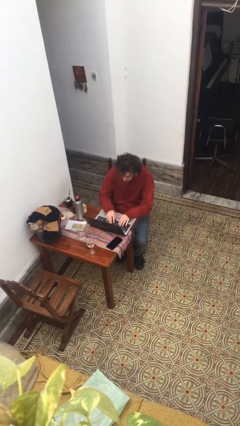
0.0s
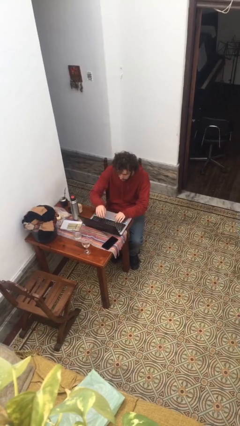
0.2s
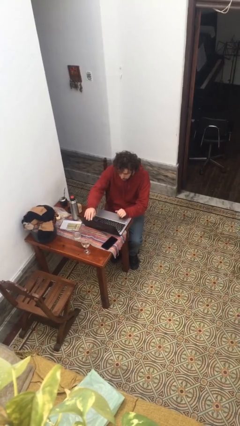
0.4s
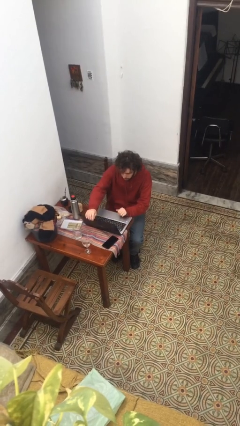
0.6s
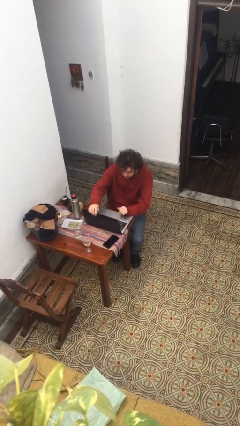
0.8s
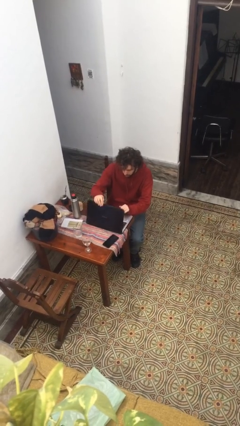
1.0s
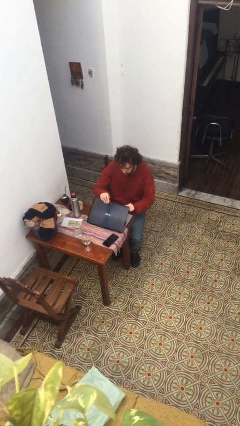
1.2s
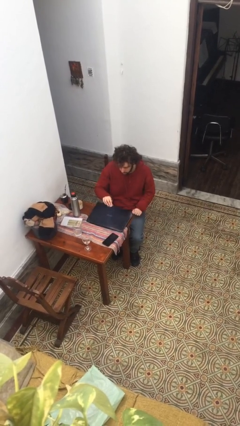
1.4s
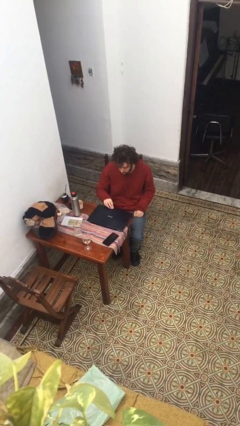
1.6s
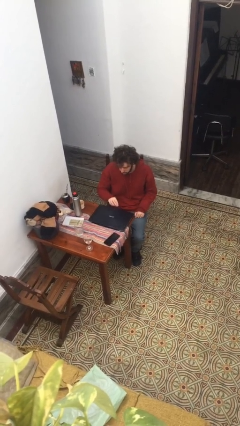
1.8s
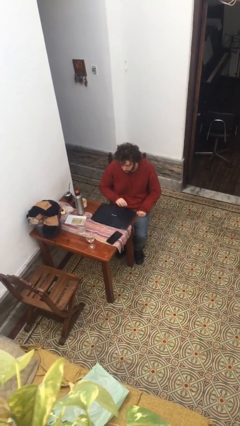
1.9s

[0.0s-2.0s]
person closes laptop

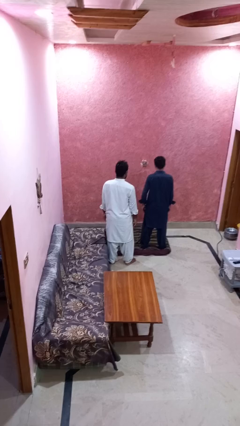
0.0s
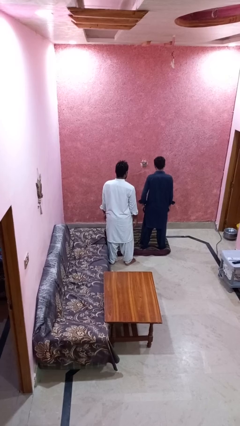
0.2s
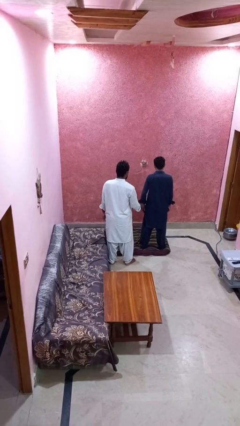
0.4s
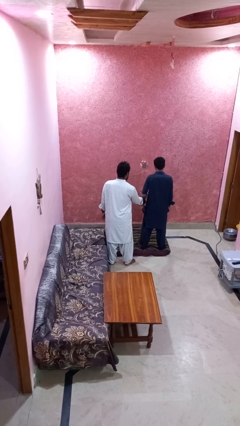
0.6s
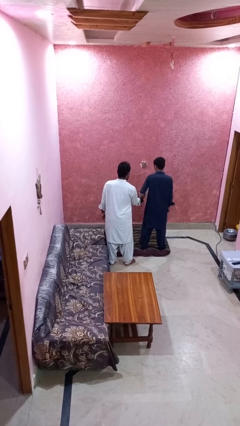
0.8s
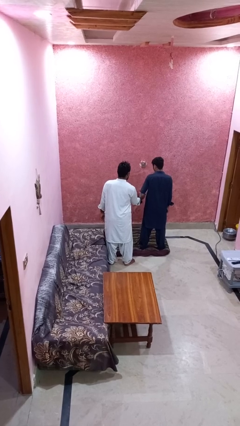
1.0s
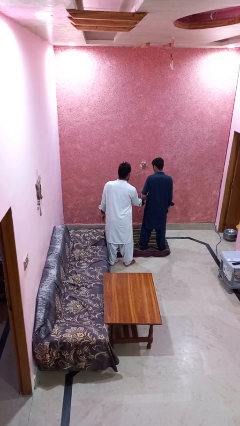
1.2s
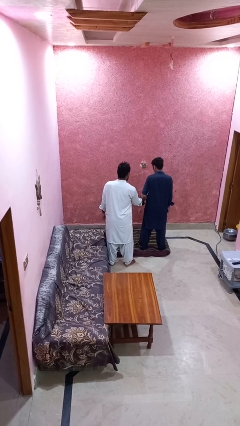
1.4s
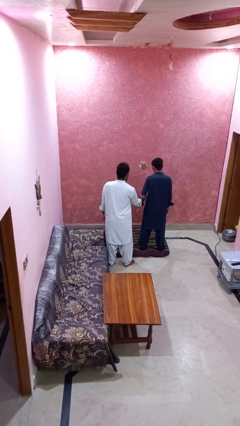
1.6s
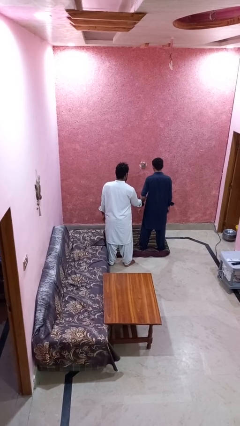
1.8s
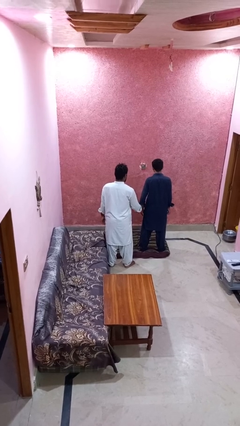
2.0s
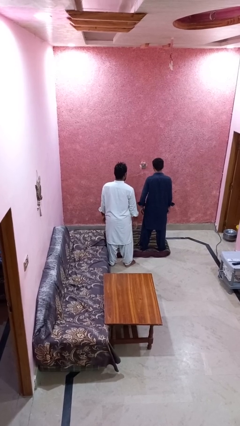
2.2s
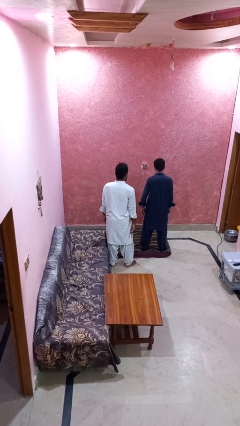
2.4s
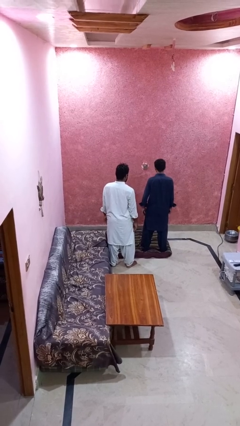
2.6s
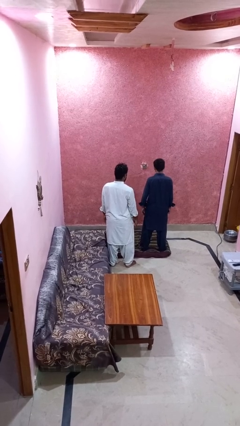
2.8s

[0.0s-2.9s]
person grabs person by bicep

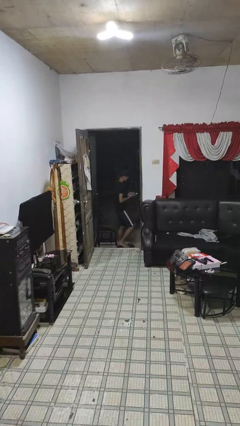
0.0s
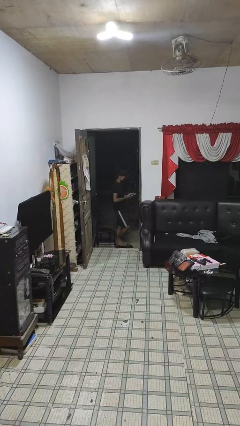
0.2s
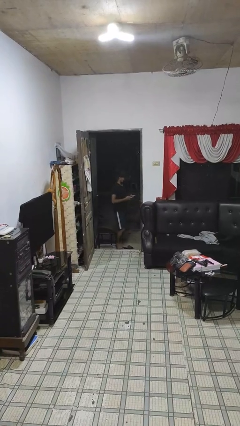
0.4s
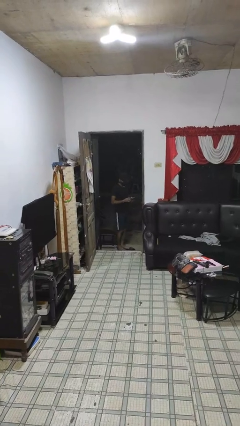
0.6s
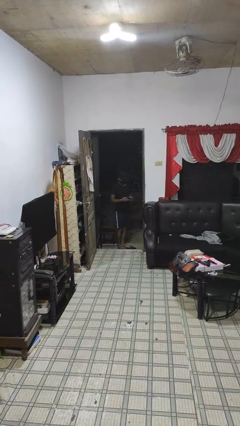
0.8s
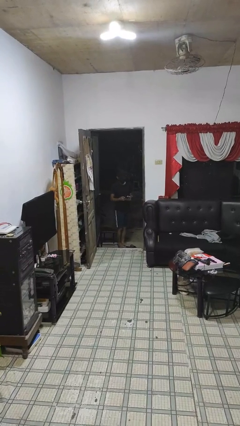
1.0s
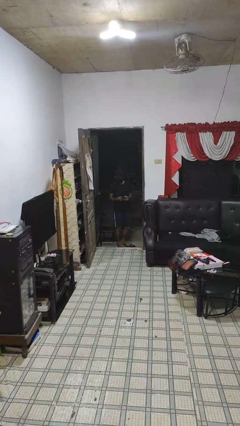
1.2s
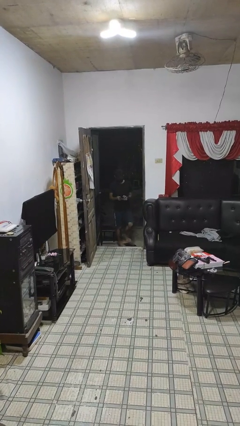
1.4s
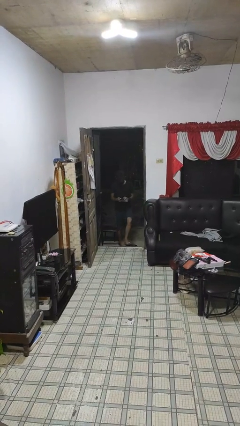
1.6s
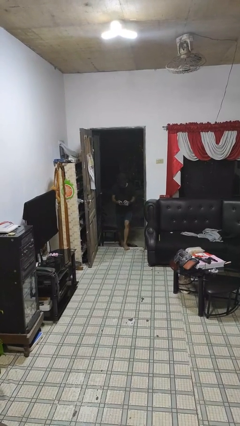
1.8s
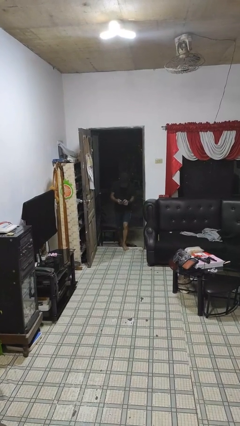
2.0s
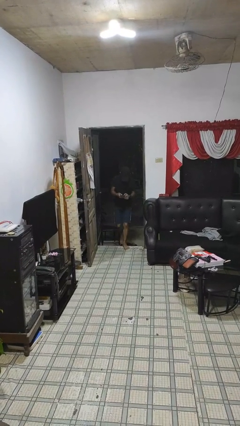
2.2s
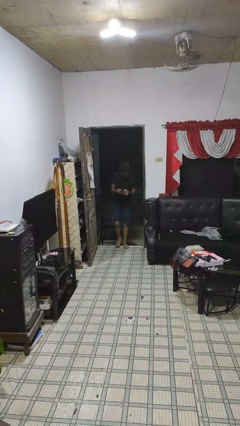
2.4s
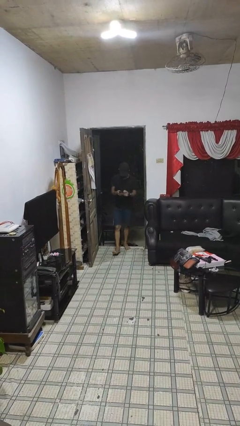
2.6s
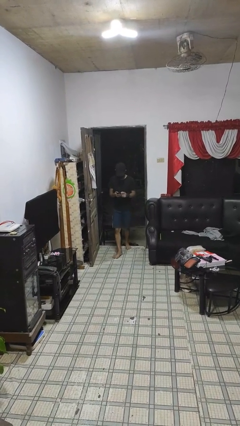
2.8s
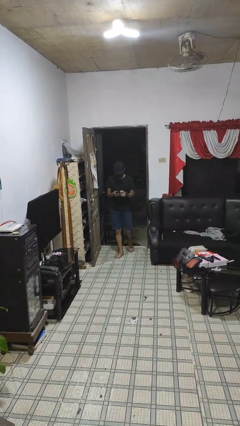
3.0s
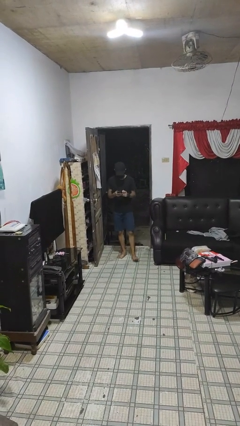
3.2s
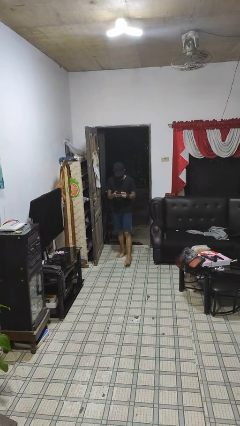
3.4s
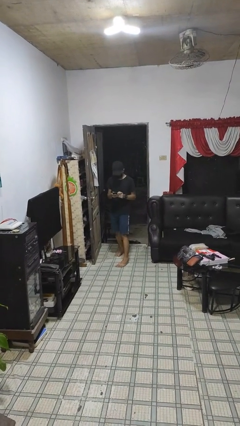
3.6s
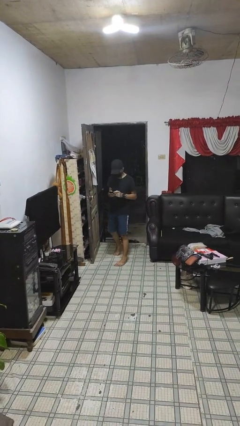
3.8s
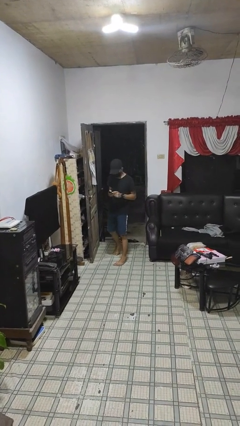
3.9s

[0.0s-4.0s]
person enters scene through structure

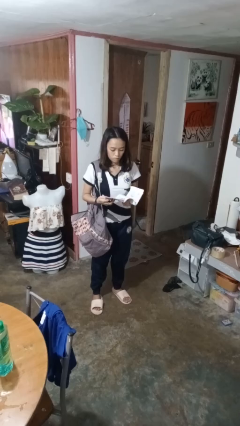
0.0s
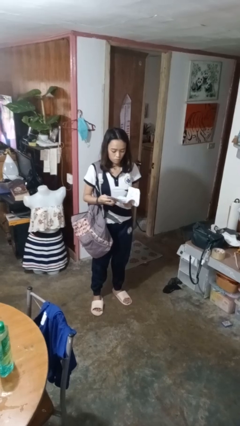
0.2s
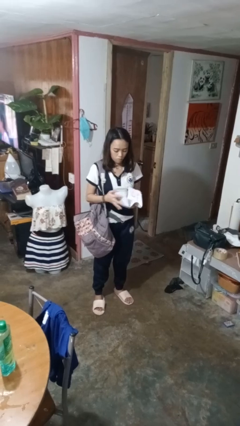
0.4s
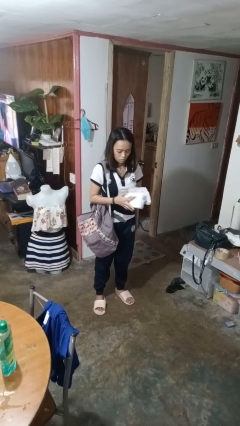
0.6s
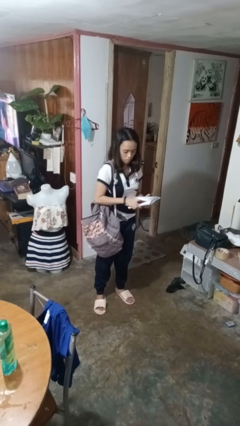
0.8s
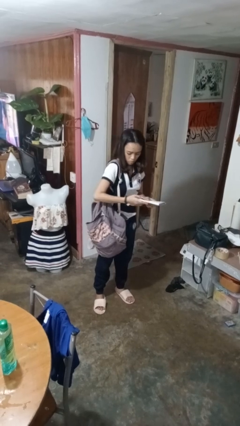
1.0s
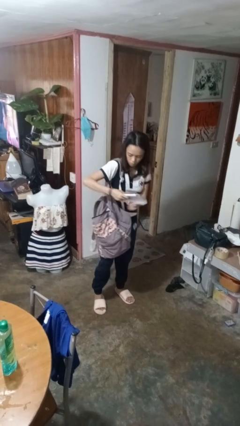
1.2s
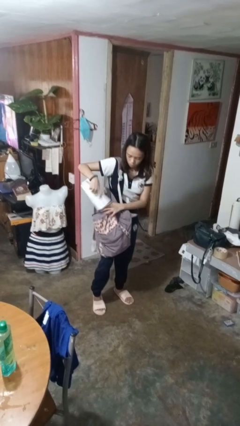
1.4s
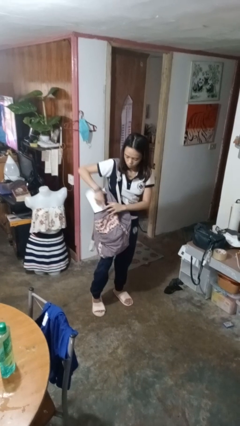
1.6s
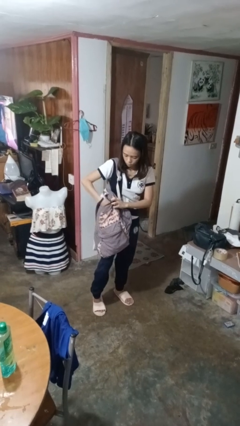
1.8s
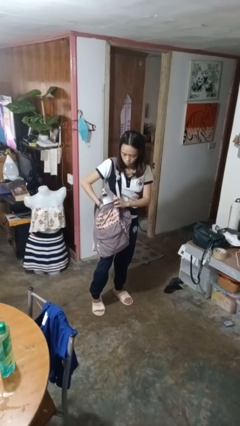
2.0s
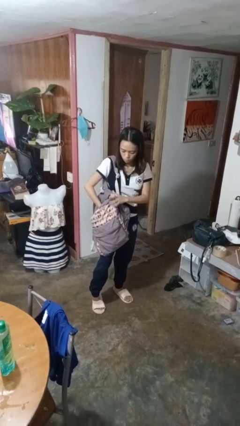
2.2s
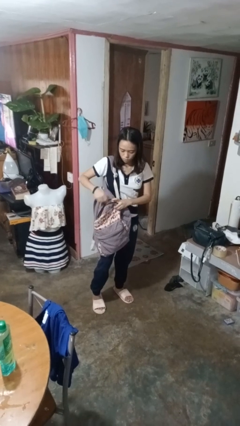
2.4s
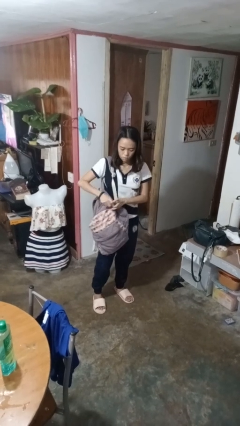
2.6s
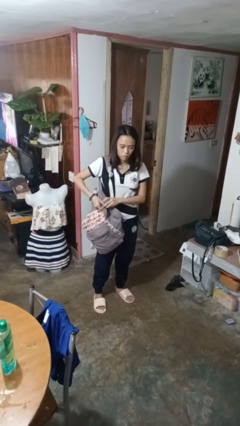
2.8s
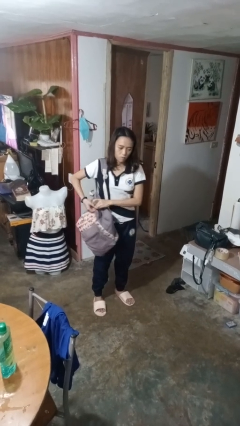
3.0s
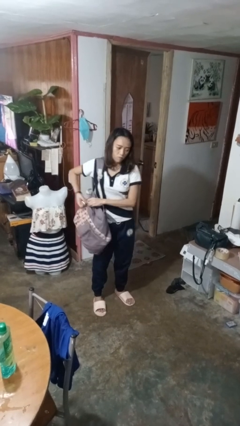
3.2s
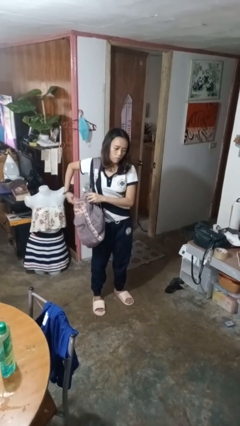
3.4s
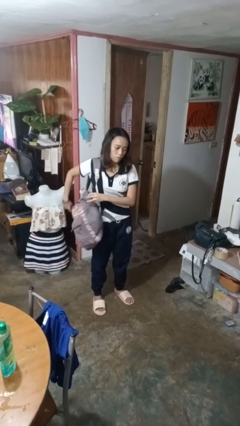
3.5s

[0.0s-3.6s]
person puts object into backpack

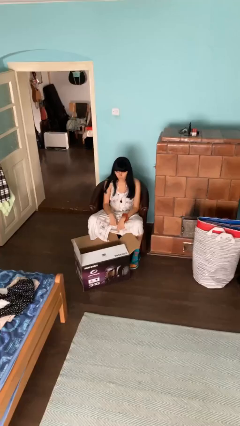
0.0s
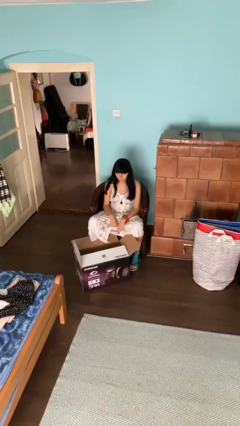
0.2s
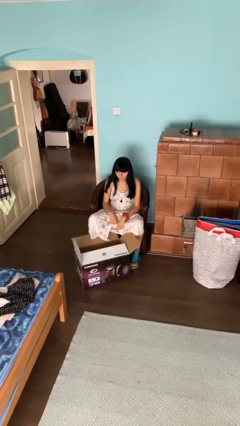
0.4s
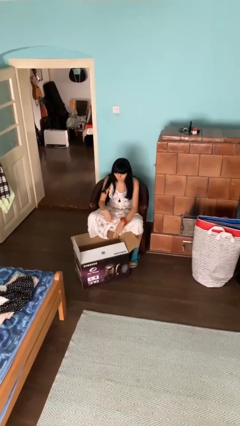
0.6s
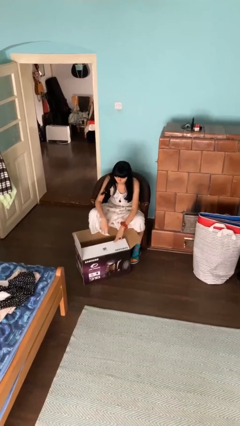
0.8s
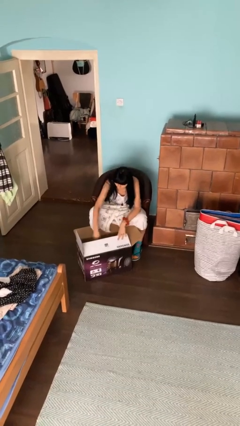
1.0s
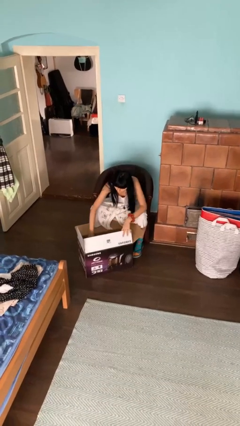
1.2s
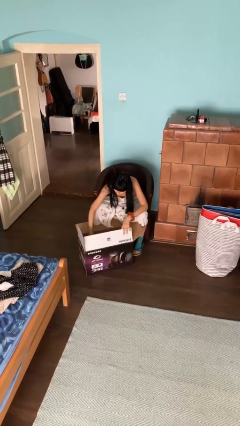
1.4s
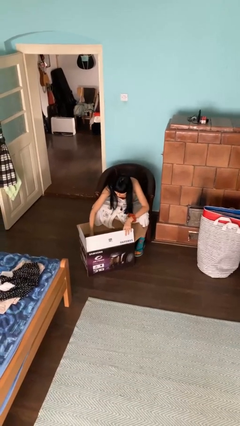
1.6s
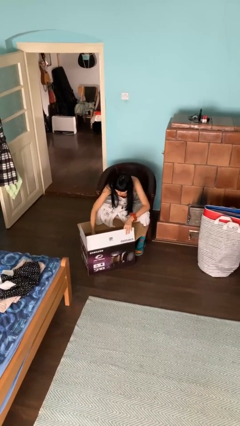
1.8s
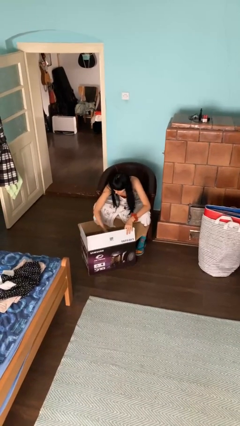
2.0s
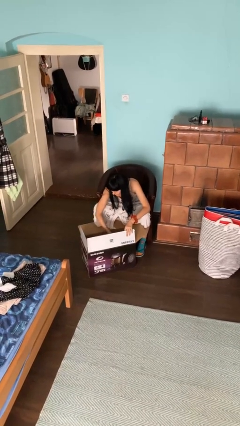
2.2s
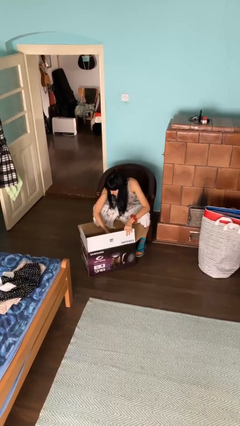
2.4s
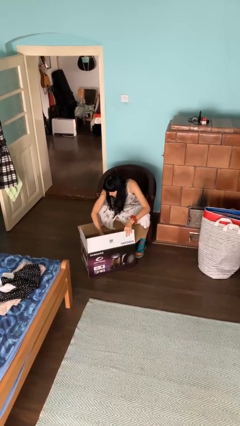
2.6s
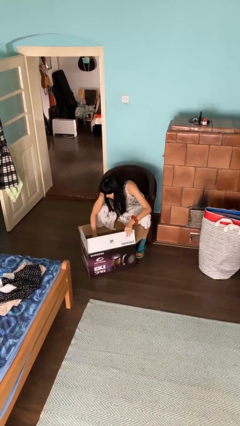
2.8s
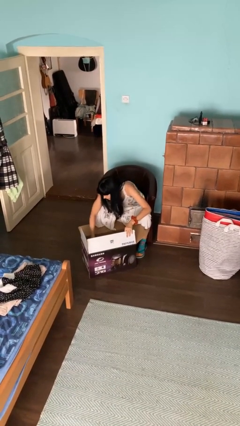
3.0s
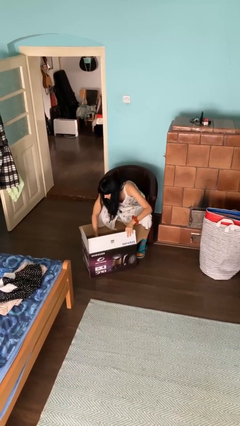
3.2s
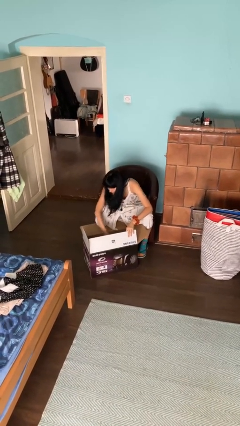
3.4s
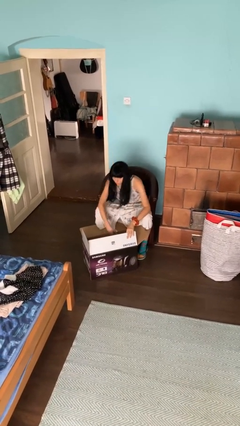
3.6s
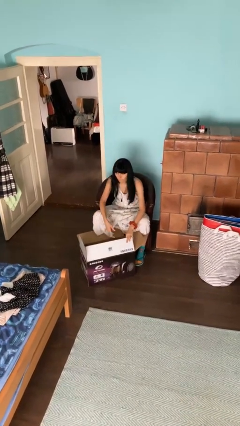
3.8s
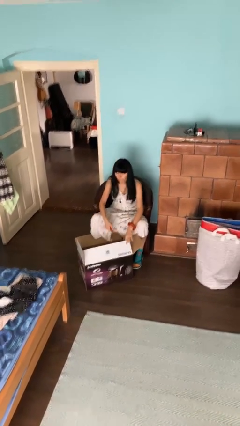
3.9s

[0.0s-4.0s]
person searches in box

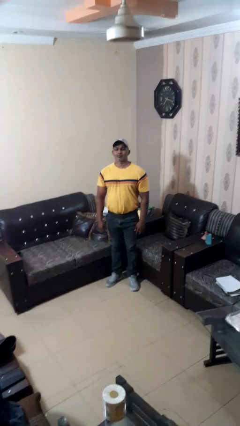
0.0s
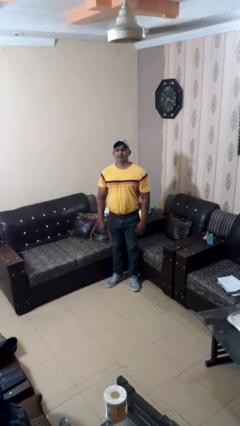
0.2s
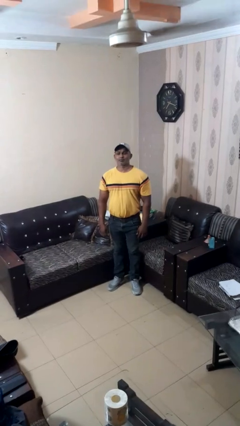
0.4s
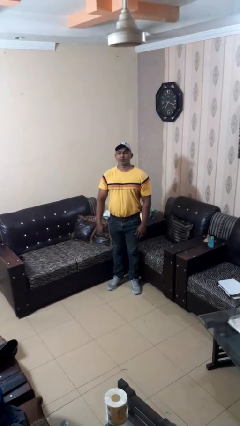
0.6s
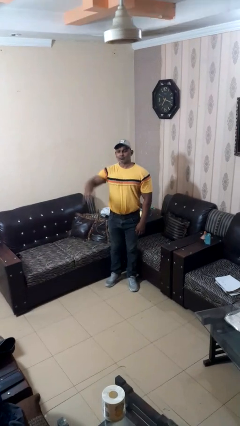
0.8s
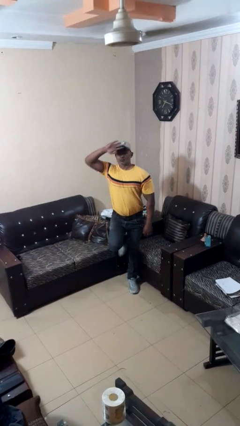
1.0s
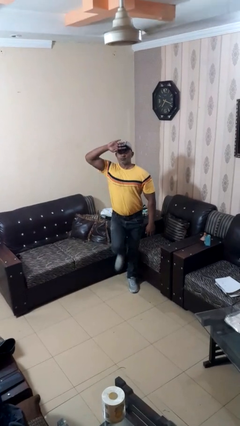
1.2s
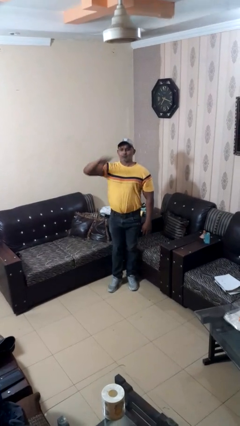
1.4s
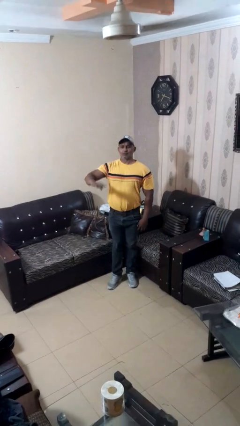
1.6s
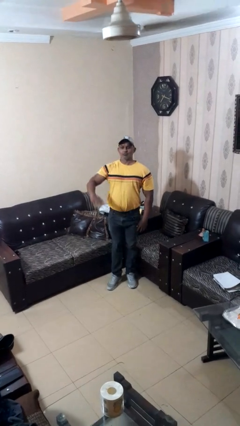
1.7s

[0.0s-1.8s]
person salutes
